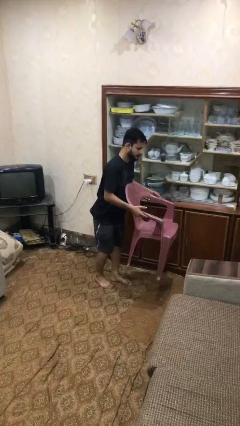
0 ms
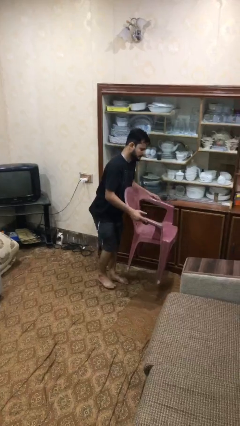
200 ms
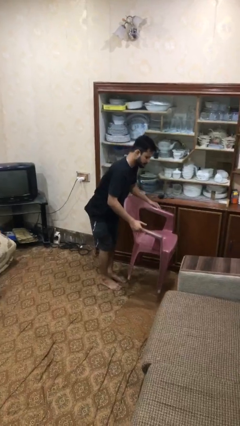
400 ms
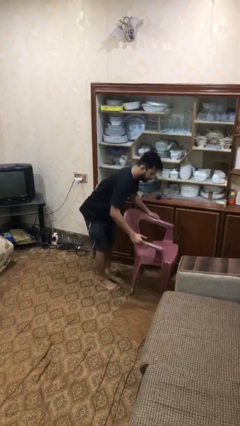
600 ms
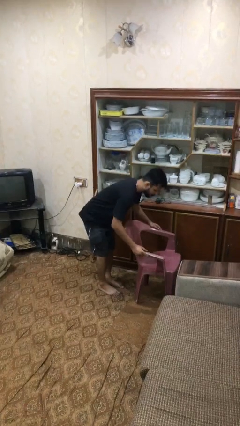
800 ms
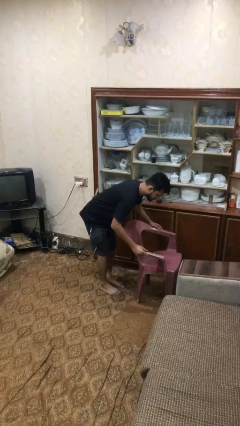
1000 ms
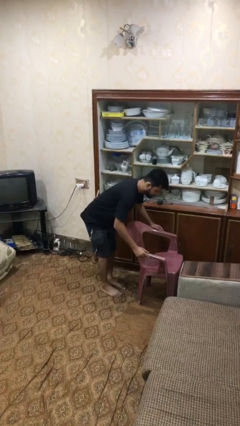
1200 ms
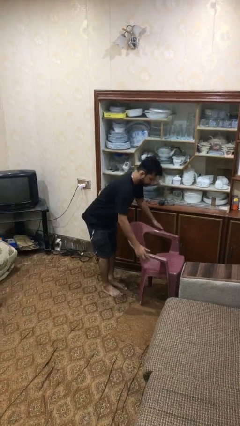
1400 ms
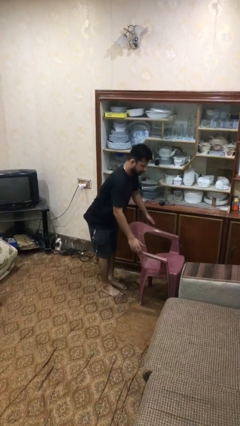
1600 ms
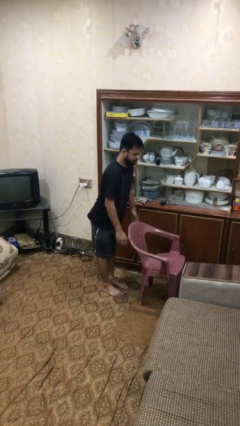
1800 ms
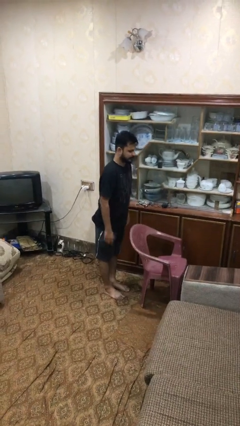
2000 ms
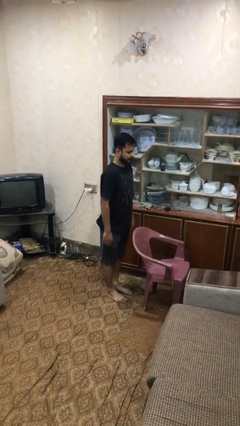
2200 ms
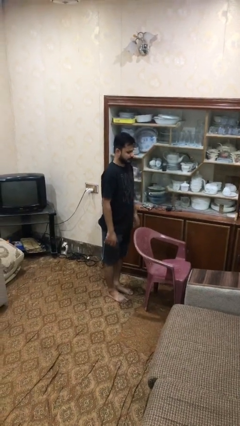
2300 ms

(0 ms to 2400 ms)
person puts down object on floor

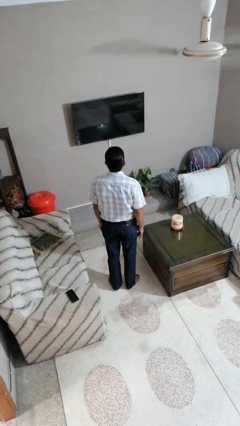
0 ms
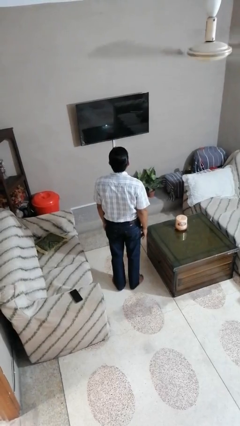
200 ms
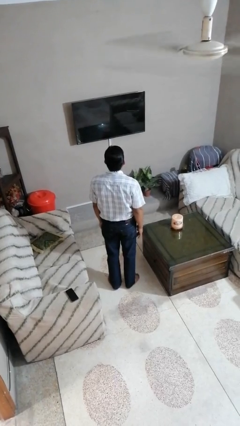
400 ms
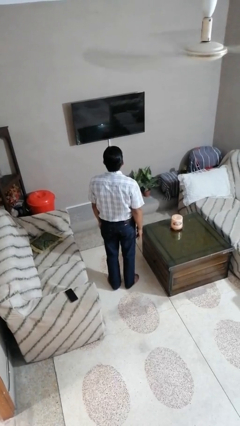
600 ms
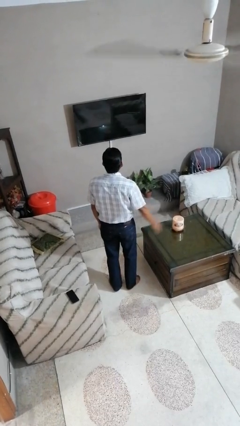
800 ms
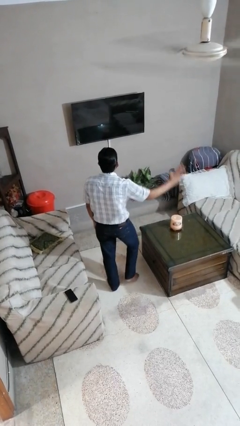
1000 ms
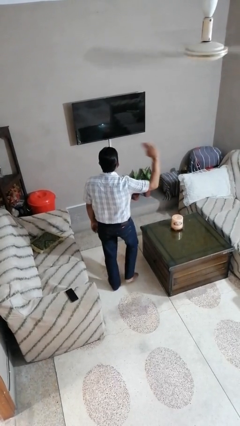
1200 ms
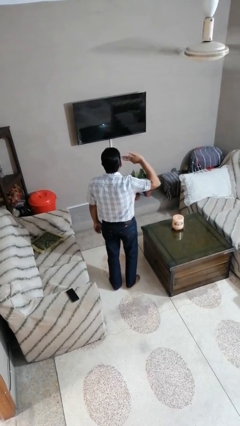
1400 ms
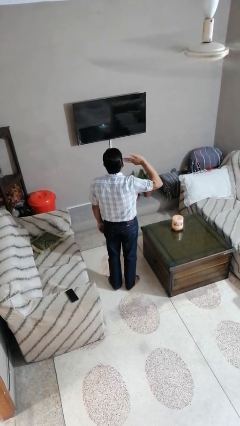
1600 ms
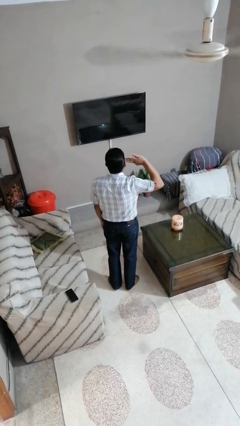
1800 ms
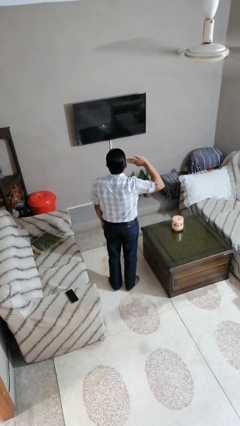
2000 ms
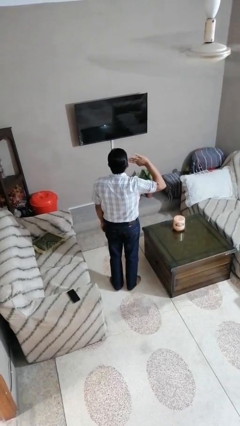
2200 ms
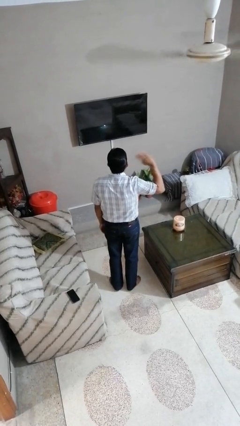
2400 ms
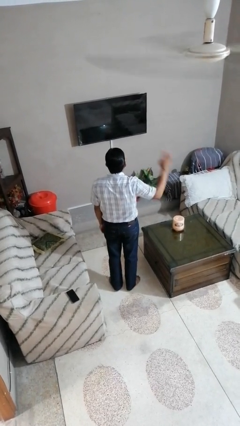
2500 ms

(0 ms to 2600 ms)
person salutes

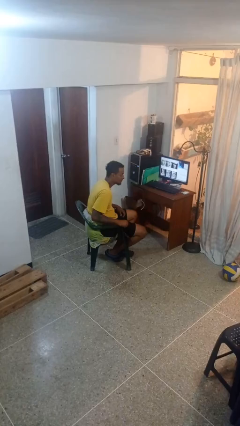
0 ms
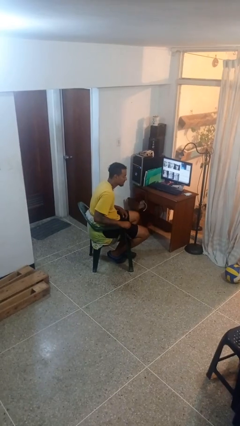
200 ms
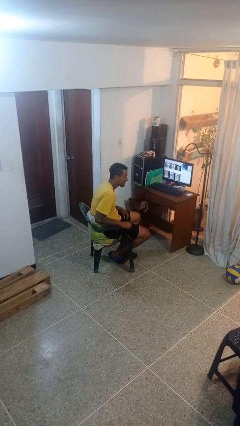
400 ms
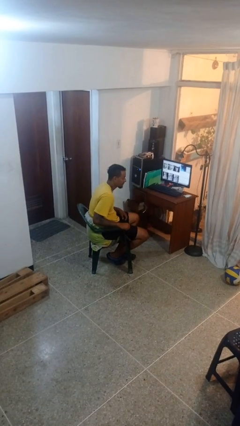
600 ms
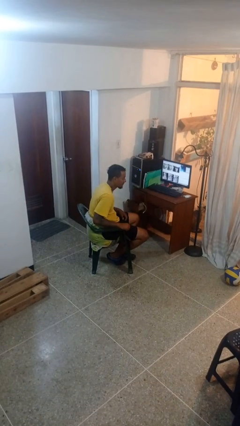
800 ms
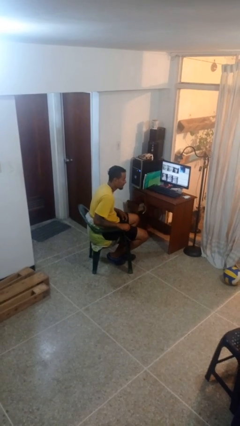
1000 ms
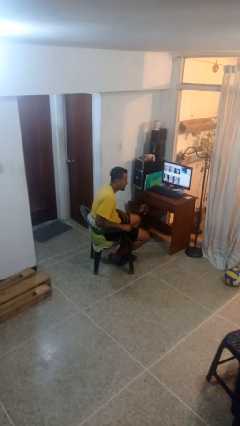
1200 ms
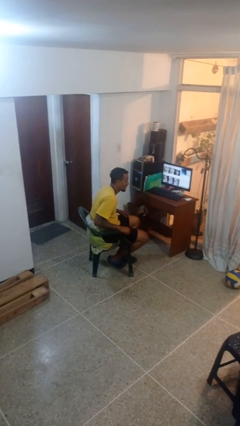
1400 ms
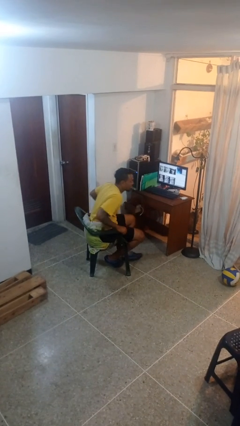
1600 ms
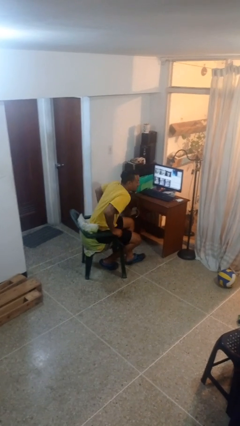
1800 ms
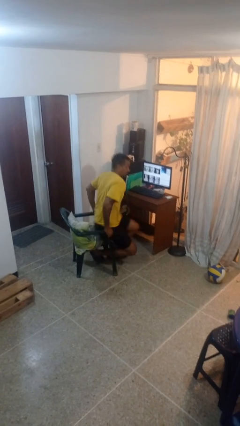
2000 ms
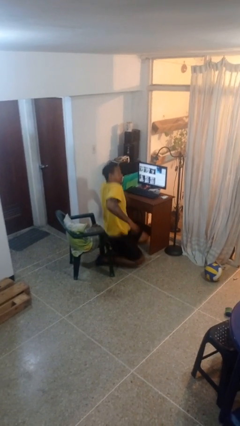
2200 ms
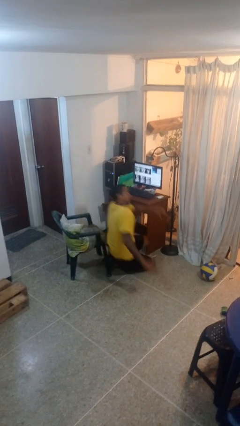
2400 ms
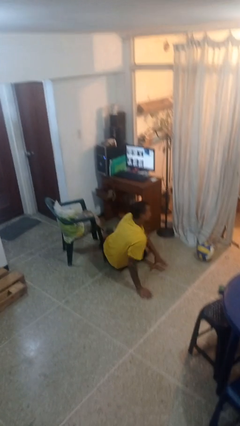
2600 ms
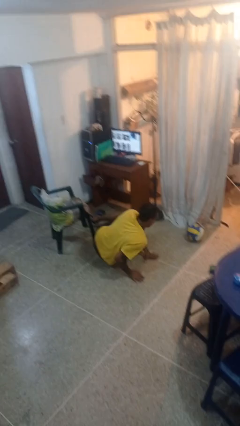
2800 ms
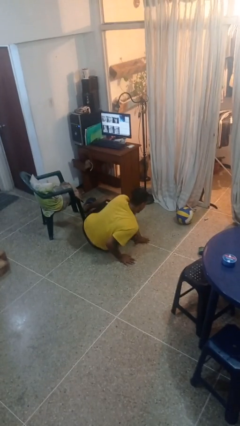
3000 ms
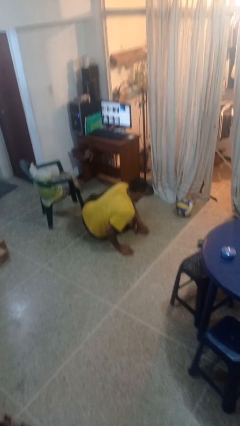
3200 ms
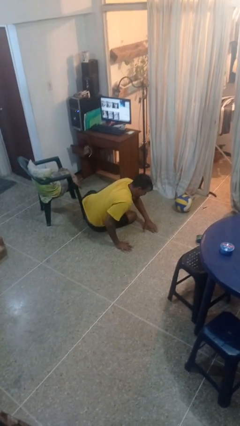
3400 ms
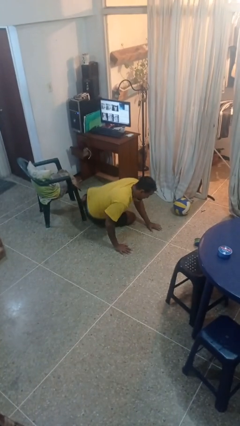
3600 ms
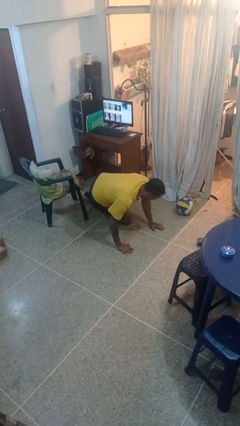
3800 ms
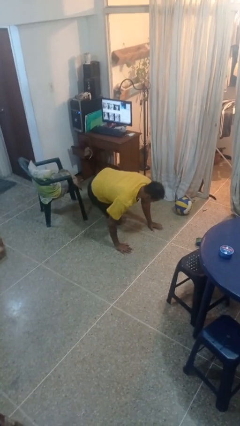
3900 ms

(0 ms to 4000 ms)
person falls from chair

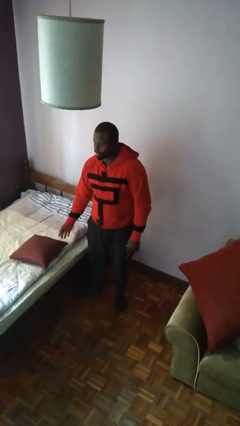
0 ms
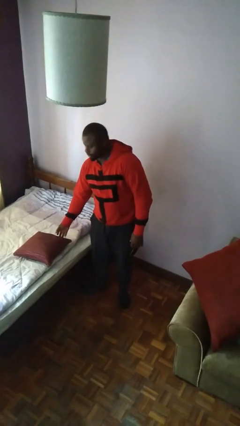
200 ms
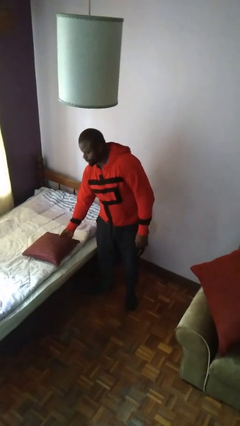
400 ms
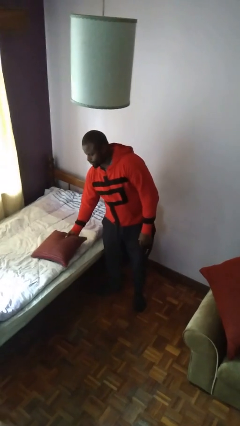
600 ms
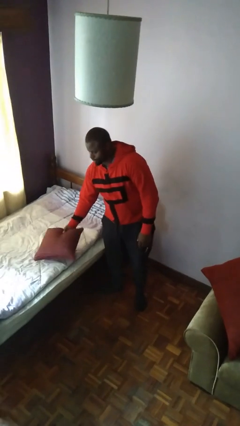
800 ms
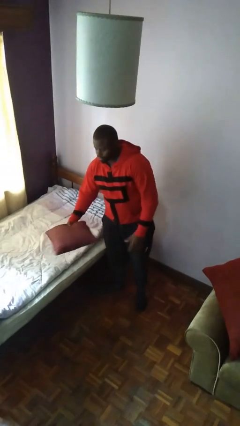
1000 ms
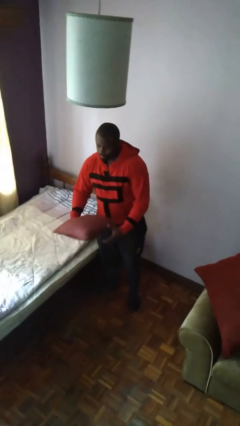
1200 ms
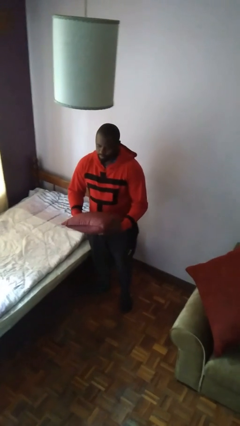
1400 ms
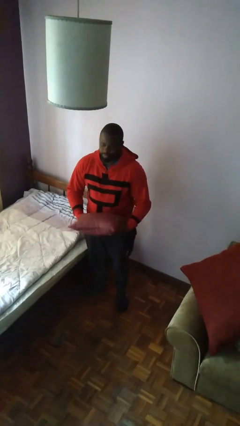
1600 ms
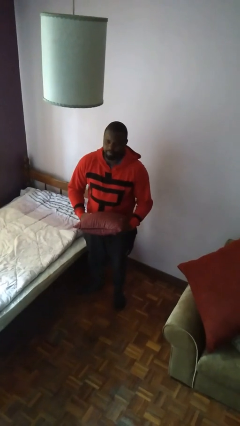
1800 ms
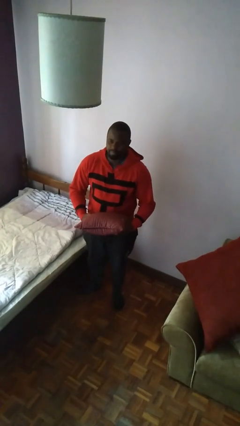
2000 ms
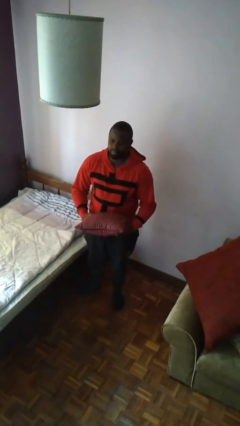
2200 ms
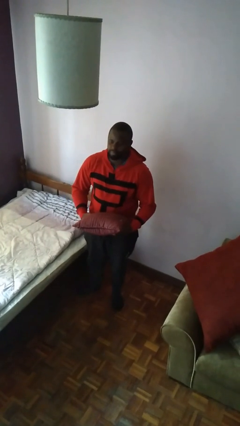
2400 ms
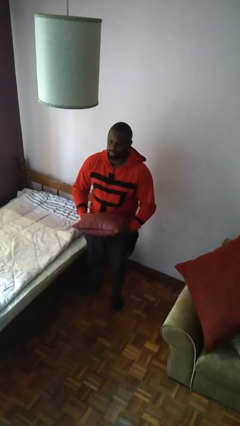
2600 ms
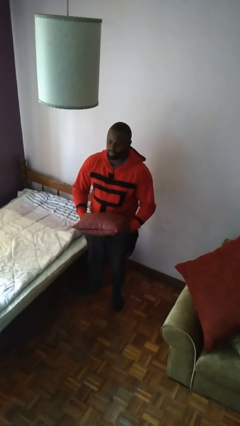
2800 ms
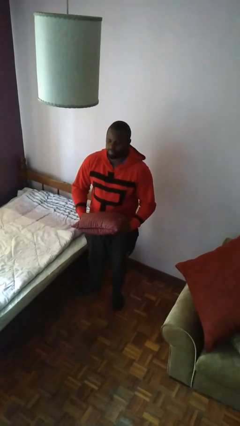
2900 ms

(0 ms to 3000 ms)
person picks up object from bed

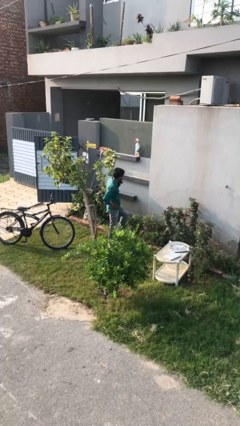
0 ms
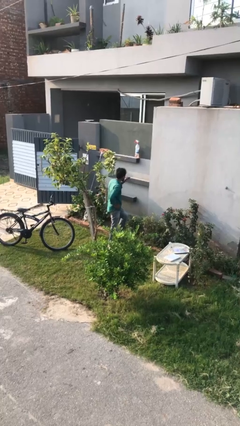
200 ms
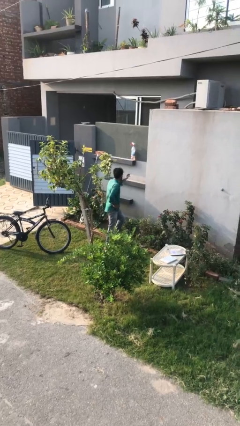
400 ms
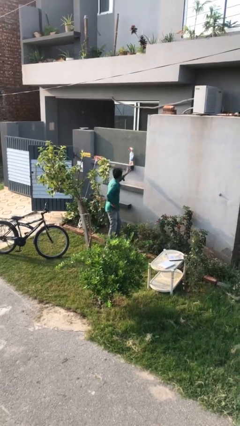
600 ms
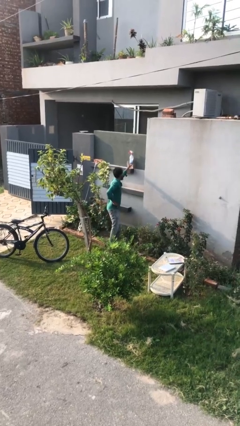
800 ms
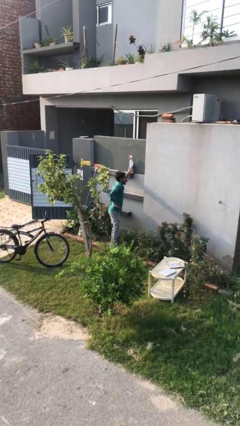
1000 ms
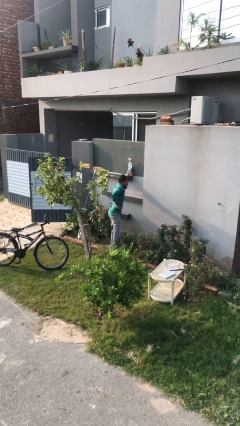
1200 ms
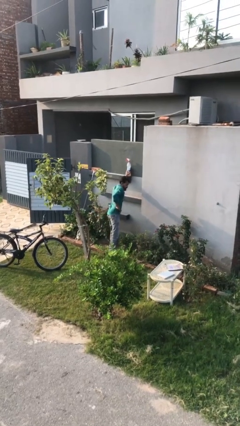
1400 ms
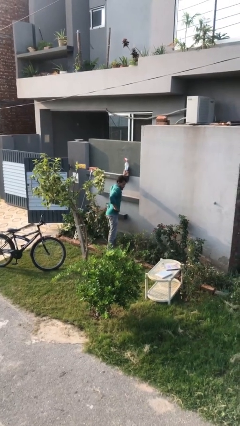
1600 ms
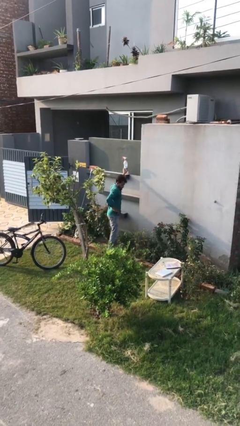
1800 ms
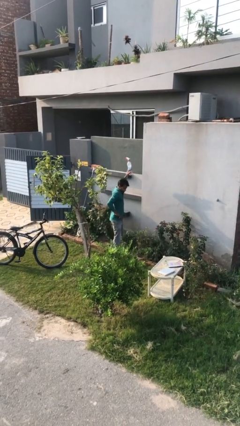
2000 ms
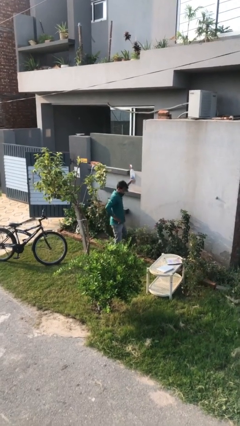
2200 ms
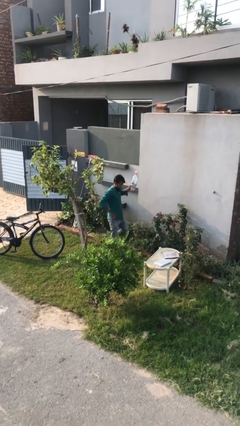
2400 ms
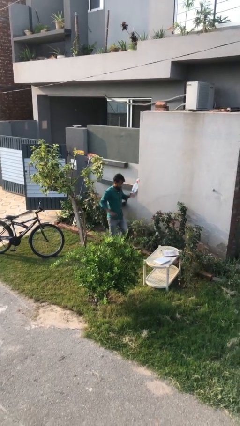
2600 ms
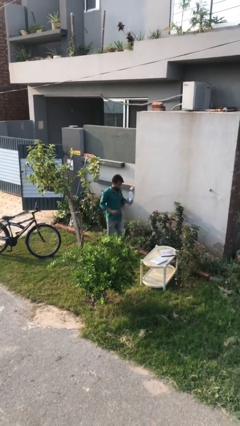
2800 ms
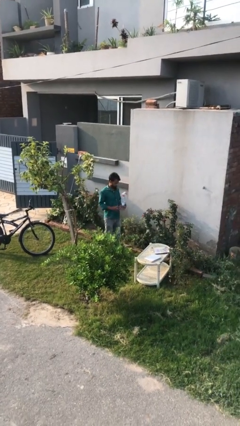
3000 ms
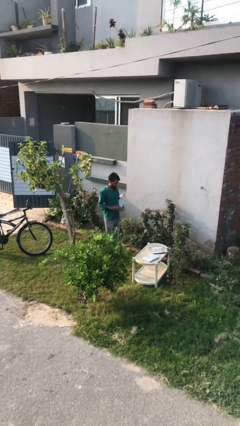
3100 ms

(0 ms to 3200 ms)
person picks up object from shelf

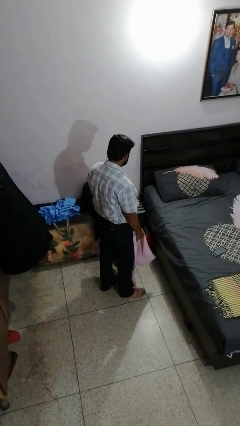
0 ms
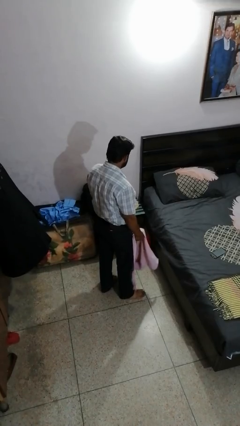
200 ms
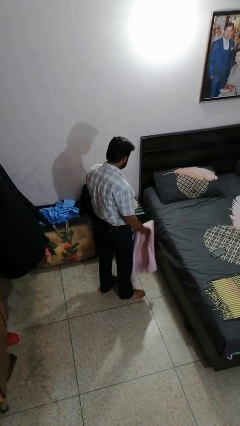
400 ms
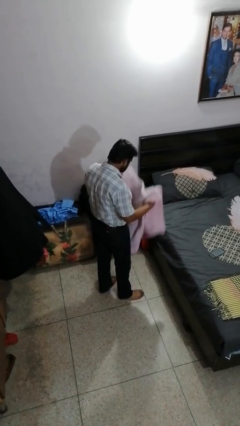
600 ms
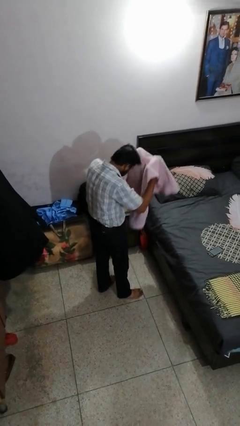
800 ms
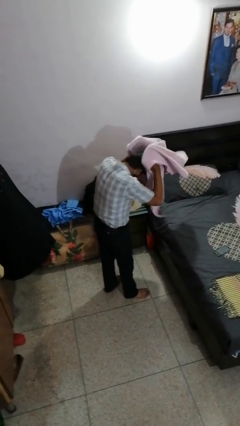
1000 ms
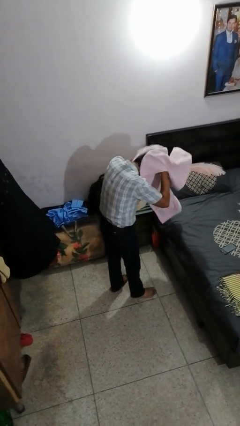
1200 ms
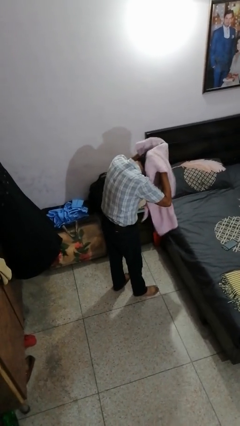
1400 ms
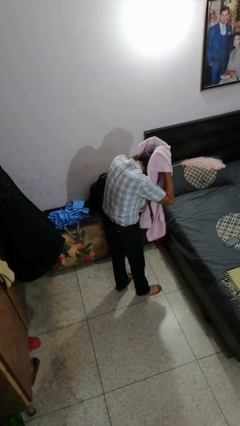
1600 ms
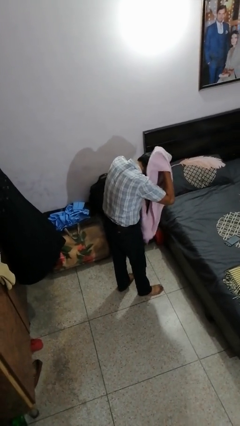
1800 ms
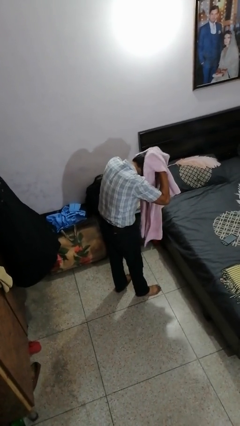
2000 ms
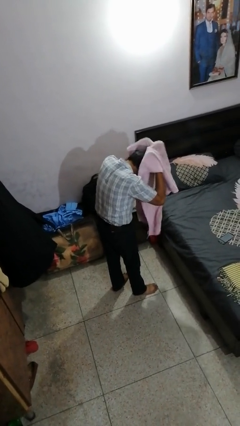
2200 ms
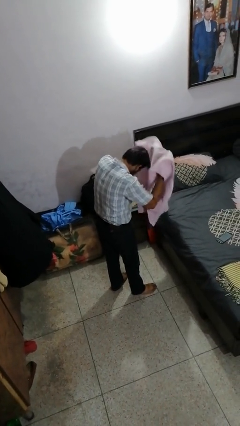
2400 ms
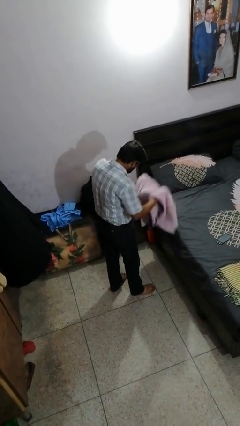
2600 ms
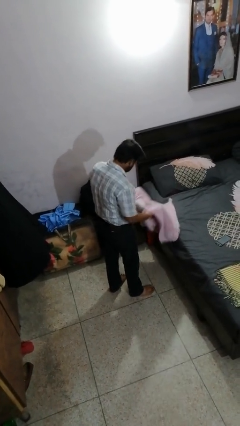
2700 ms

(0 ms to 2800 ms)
person dries hair with towel

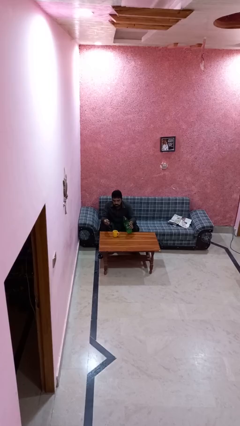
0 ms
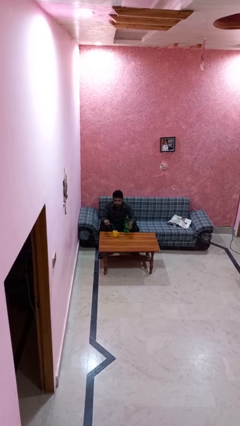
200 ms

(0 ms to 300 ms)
person pours liquid into cup
